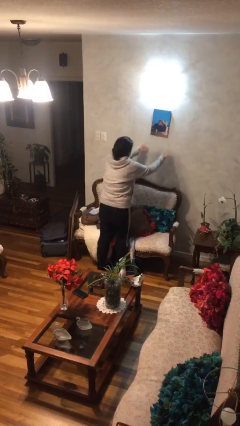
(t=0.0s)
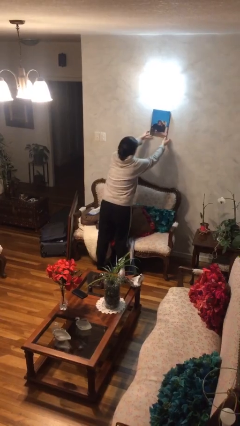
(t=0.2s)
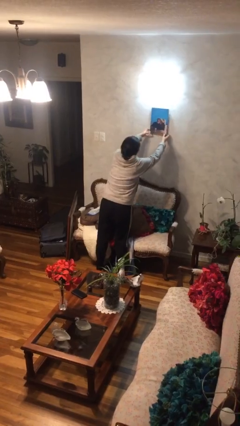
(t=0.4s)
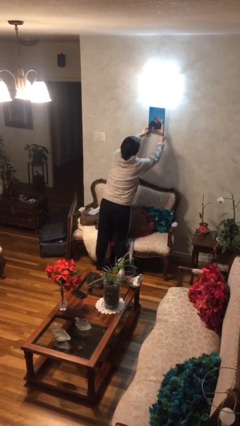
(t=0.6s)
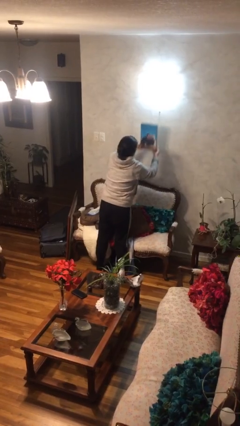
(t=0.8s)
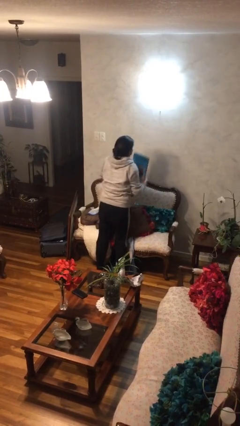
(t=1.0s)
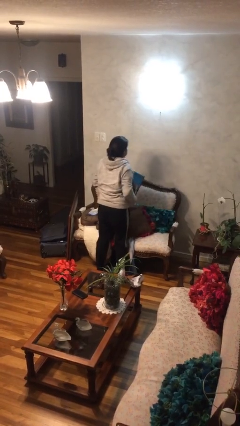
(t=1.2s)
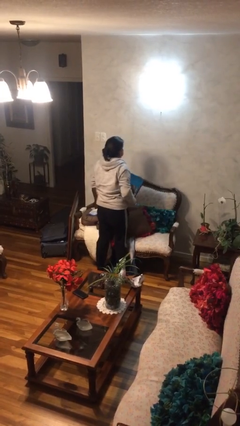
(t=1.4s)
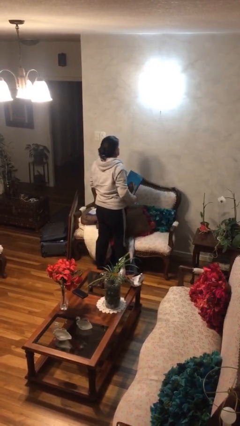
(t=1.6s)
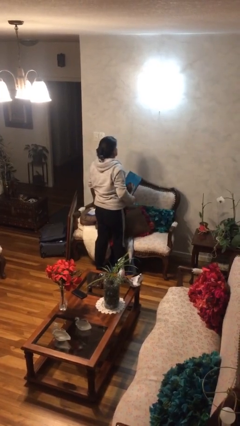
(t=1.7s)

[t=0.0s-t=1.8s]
person takes down picture frame

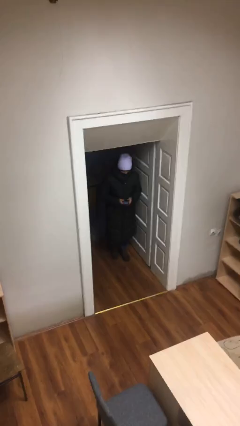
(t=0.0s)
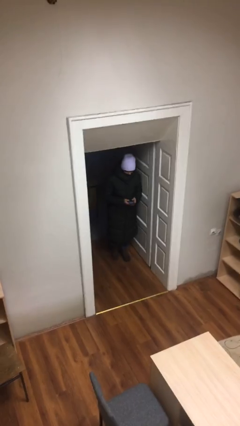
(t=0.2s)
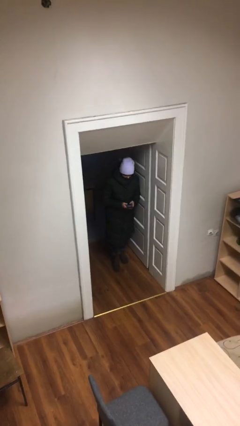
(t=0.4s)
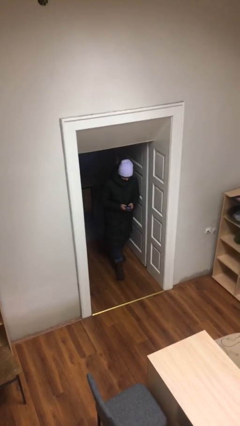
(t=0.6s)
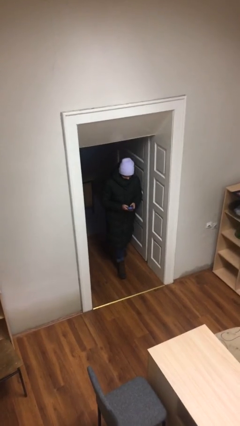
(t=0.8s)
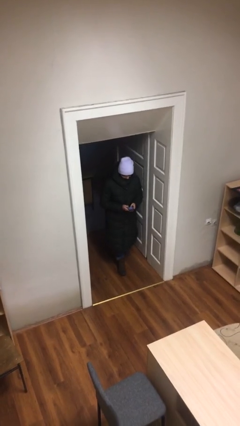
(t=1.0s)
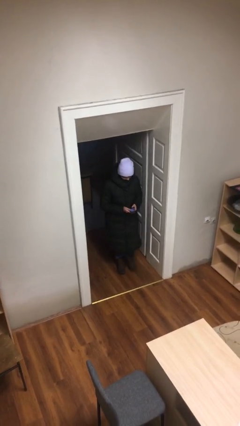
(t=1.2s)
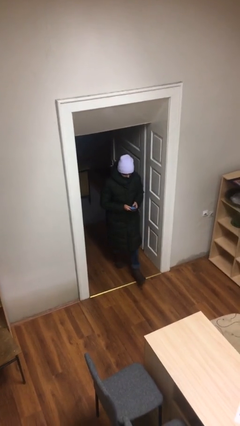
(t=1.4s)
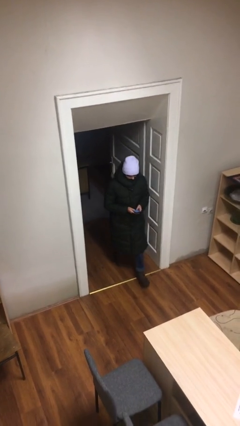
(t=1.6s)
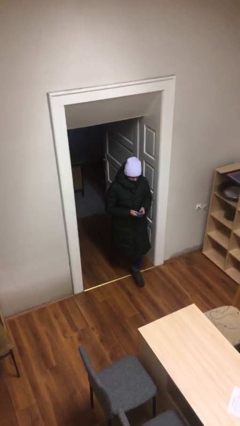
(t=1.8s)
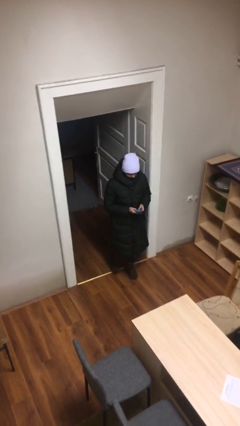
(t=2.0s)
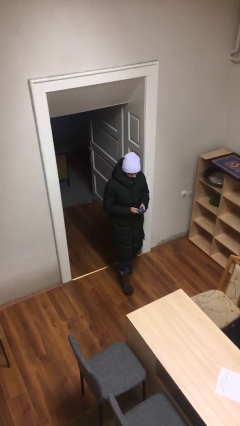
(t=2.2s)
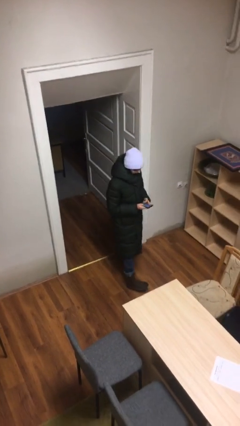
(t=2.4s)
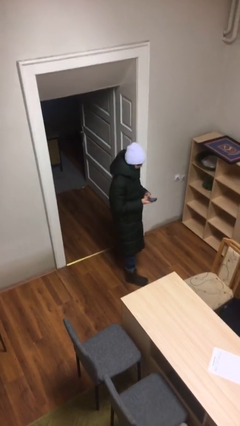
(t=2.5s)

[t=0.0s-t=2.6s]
person enters scene through structure

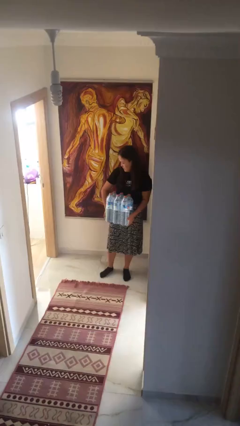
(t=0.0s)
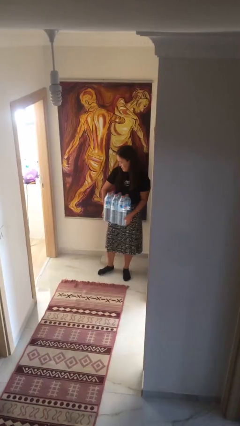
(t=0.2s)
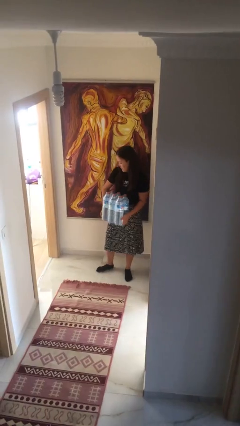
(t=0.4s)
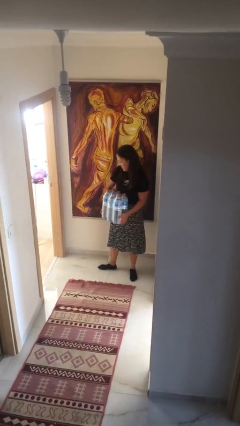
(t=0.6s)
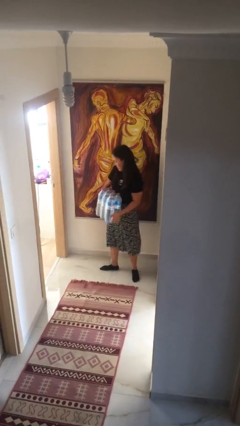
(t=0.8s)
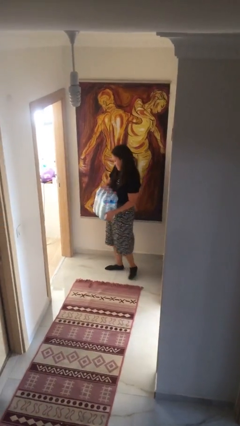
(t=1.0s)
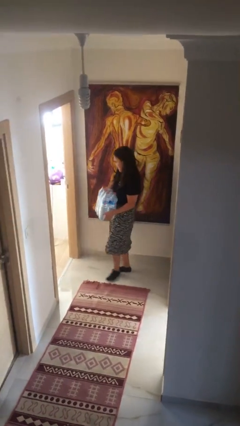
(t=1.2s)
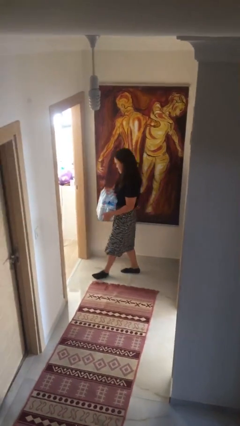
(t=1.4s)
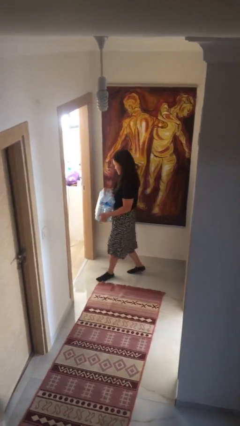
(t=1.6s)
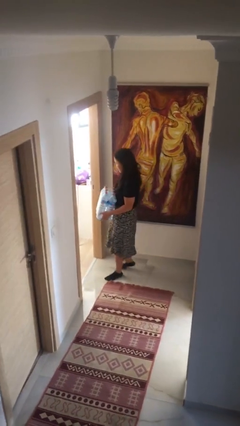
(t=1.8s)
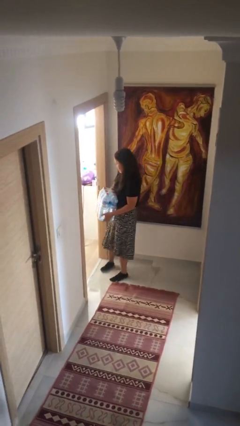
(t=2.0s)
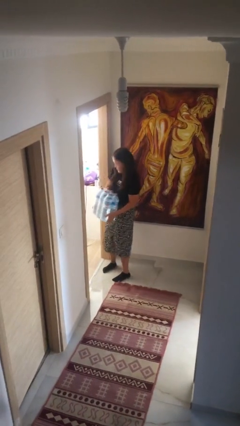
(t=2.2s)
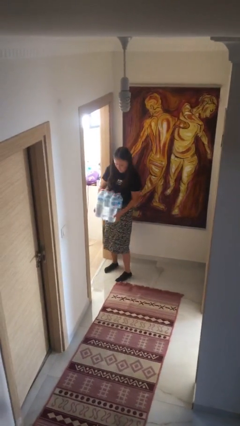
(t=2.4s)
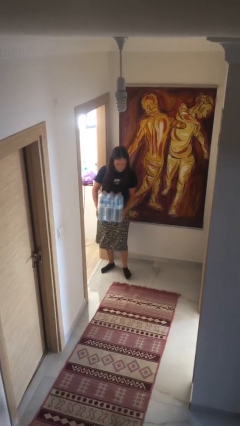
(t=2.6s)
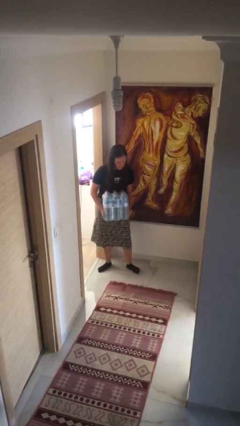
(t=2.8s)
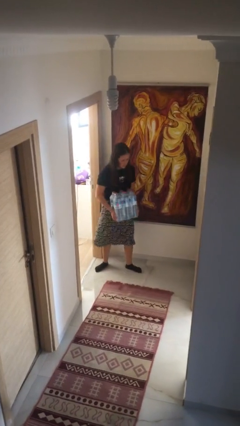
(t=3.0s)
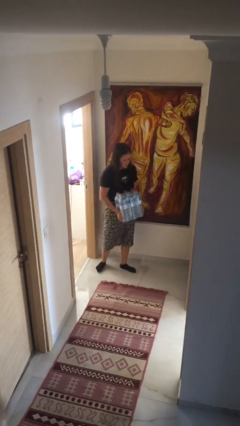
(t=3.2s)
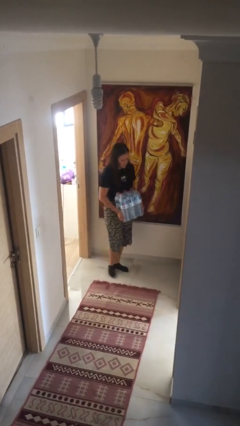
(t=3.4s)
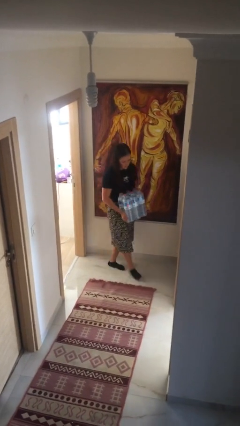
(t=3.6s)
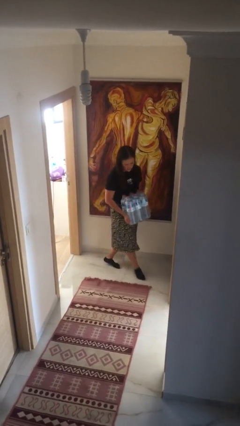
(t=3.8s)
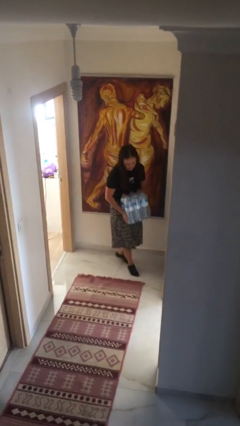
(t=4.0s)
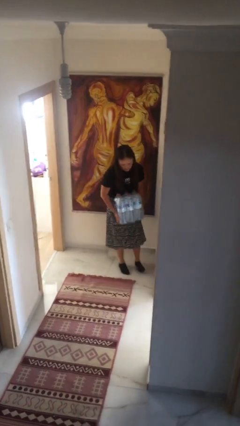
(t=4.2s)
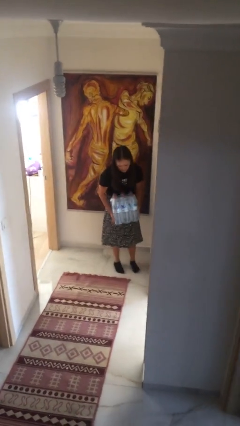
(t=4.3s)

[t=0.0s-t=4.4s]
person carries heavy object

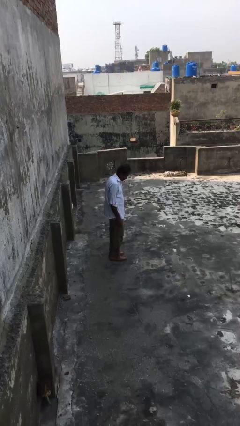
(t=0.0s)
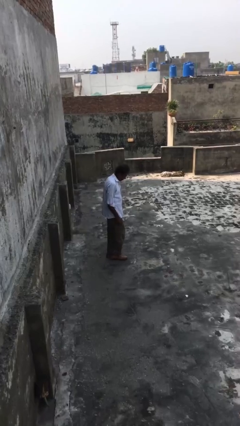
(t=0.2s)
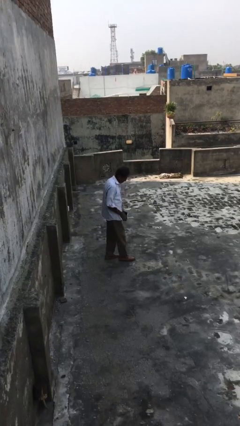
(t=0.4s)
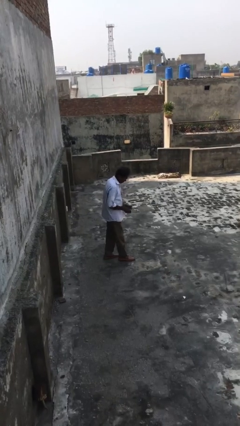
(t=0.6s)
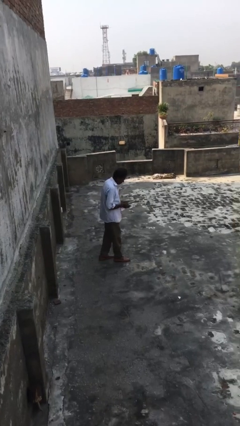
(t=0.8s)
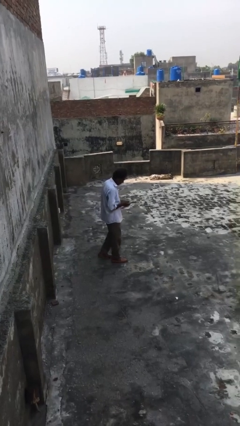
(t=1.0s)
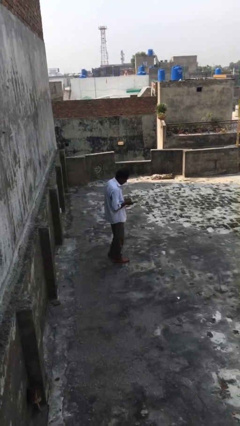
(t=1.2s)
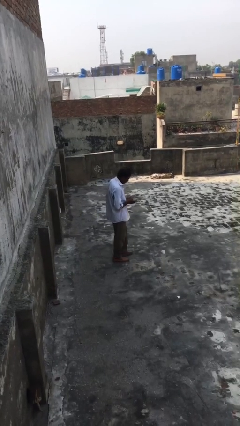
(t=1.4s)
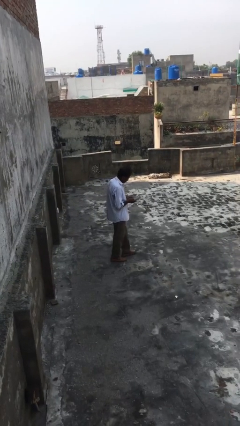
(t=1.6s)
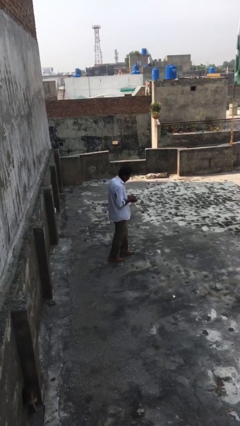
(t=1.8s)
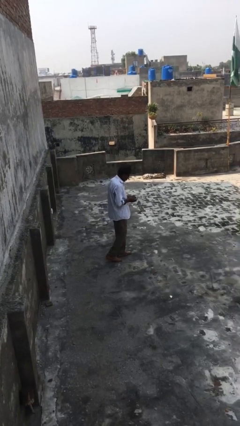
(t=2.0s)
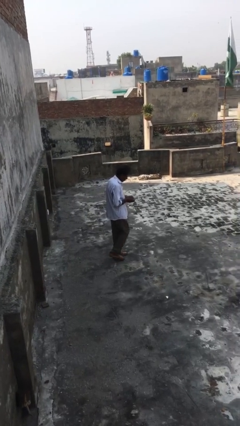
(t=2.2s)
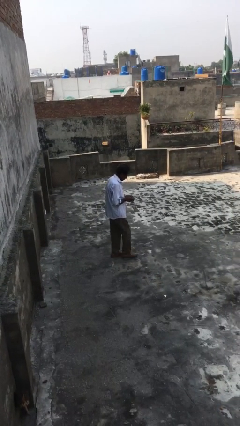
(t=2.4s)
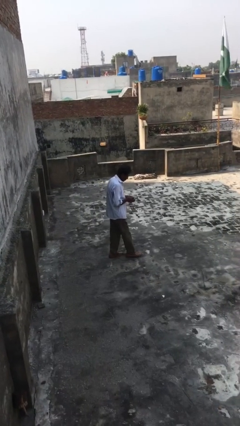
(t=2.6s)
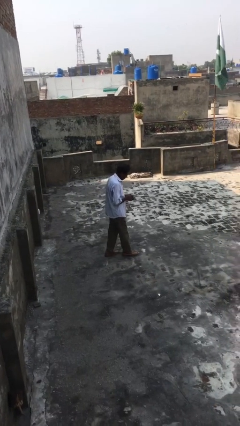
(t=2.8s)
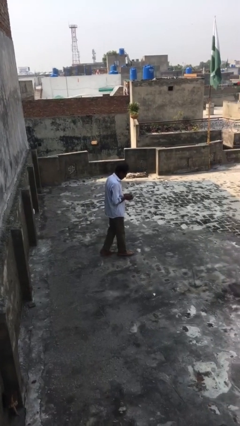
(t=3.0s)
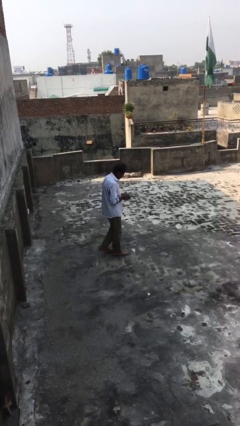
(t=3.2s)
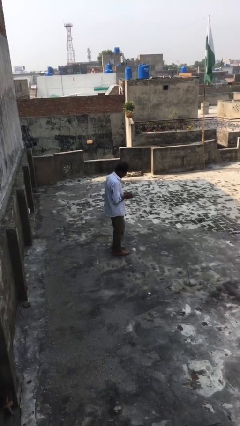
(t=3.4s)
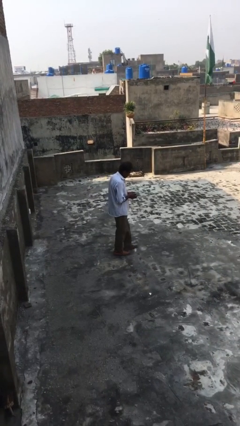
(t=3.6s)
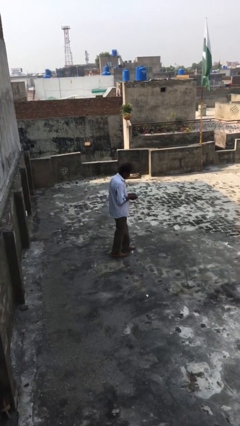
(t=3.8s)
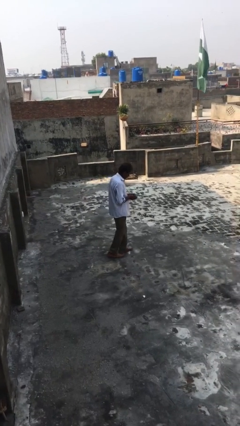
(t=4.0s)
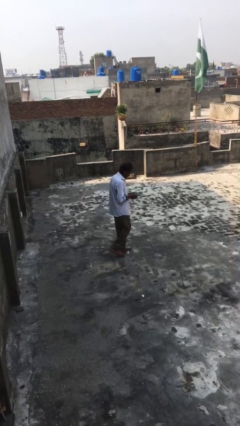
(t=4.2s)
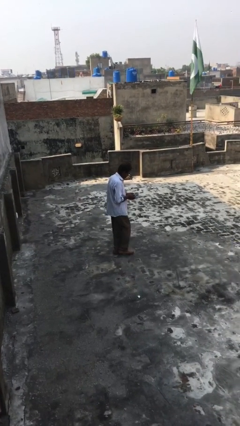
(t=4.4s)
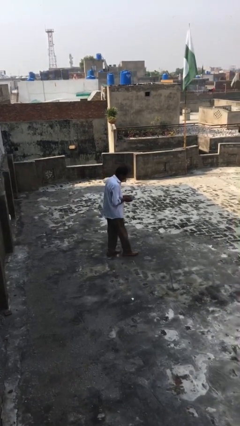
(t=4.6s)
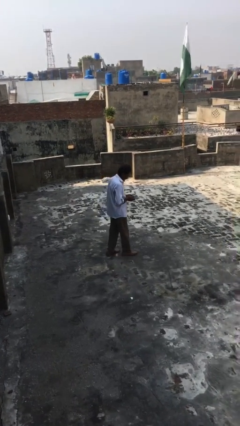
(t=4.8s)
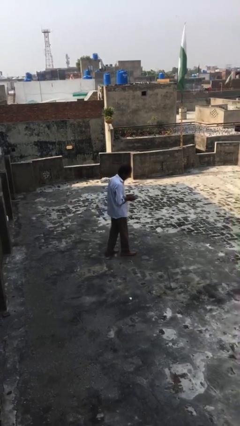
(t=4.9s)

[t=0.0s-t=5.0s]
person texts on phone

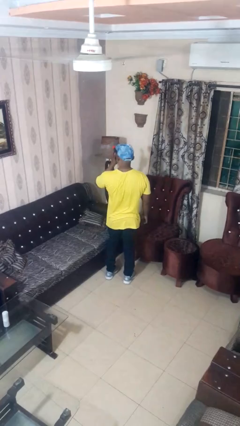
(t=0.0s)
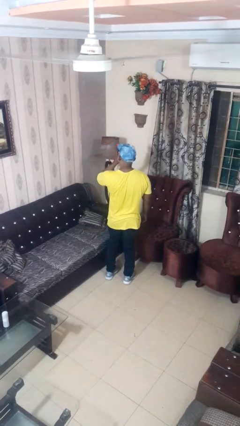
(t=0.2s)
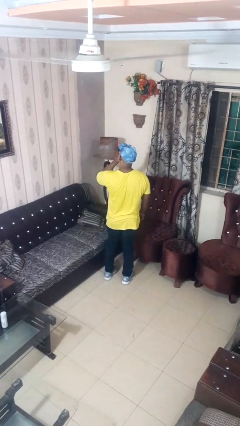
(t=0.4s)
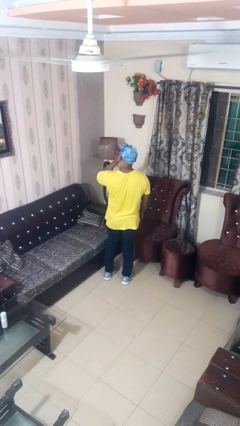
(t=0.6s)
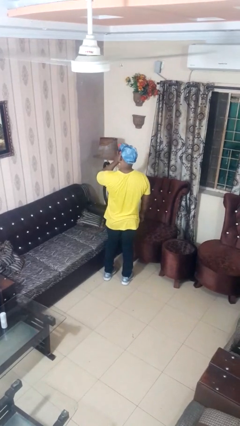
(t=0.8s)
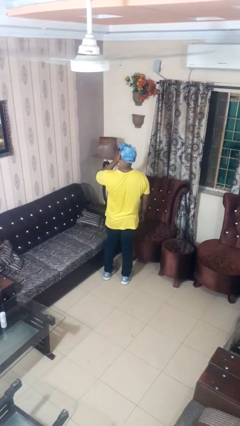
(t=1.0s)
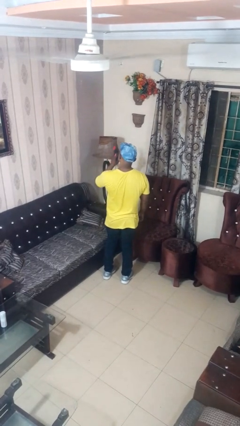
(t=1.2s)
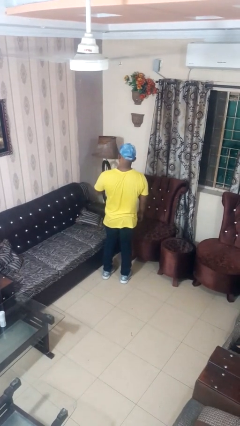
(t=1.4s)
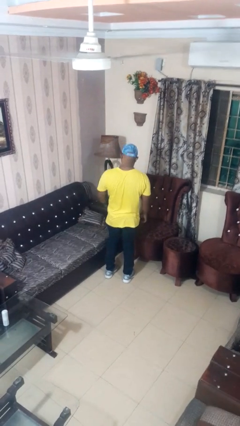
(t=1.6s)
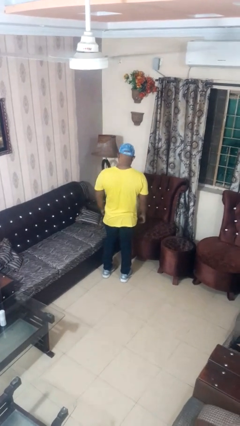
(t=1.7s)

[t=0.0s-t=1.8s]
person vapes

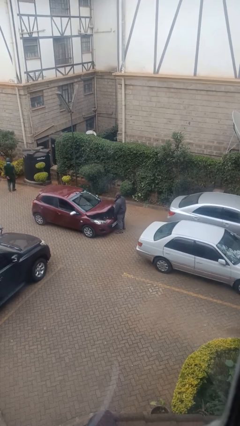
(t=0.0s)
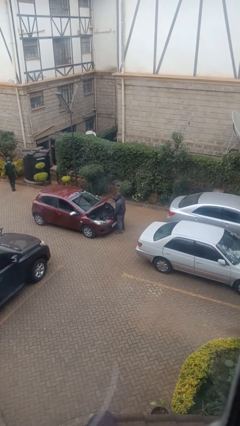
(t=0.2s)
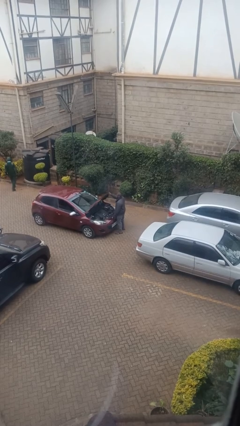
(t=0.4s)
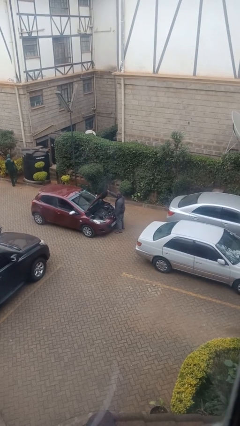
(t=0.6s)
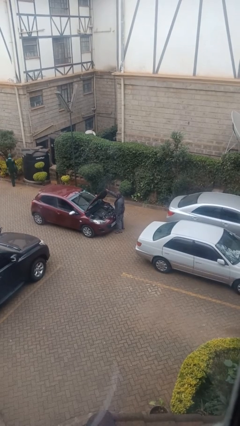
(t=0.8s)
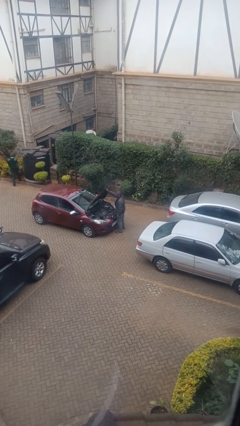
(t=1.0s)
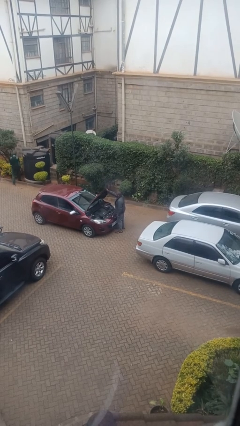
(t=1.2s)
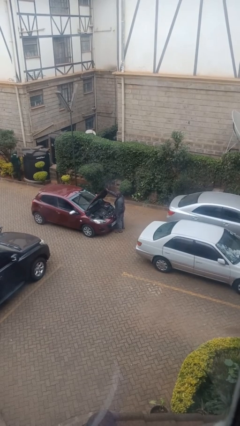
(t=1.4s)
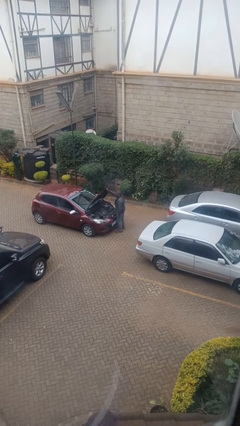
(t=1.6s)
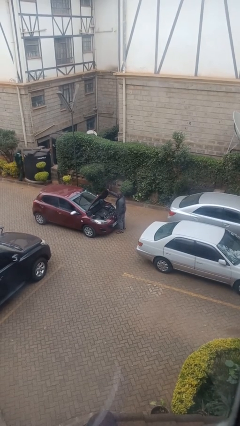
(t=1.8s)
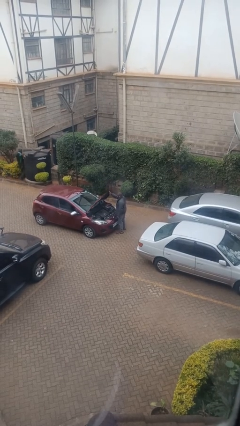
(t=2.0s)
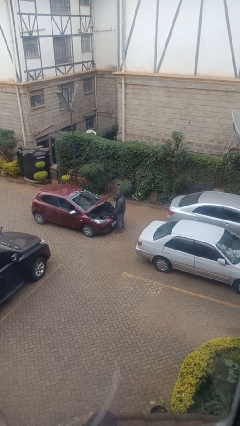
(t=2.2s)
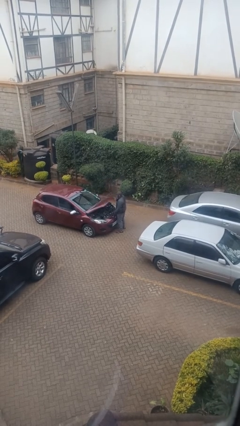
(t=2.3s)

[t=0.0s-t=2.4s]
person opens car hood
